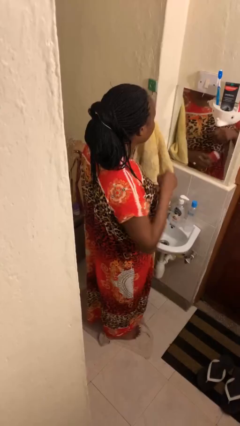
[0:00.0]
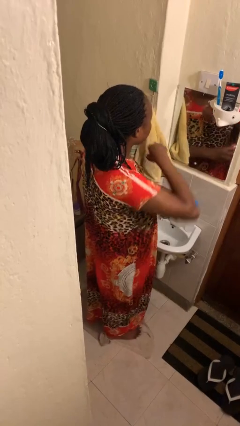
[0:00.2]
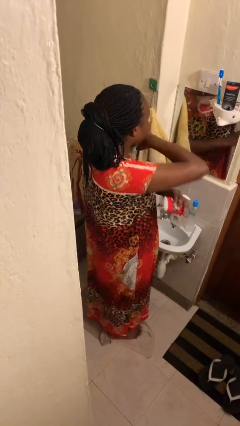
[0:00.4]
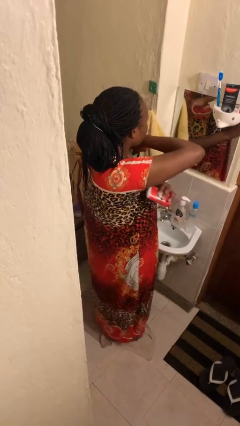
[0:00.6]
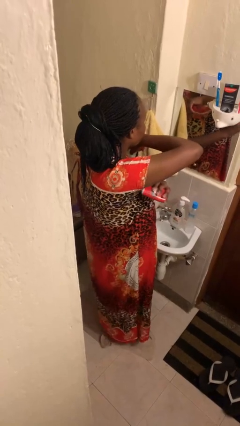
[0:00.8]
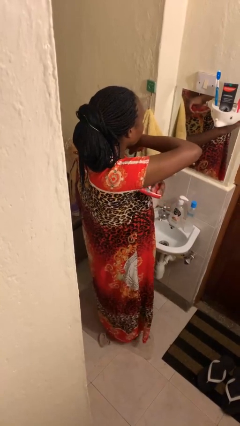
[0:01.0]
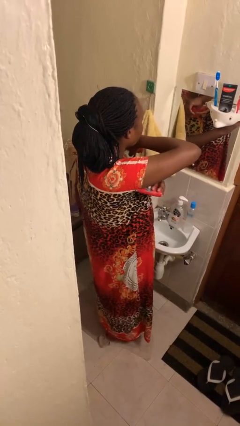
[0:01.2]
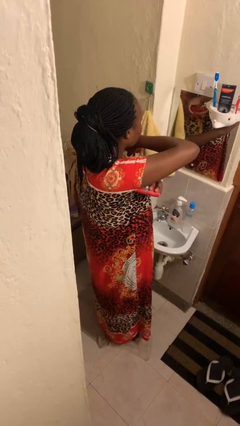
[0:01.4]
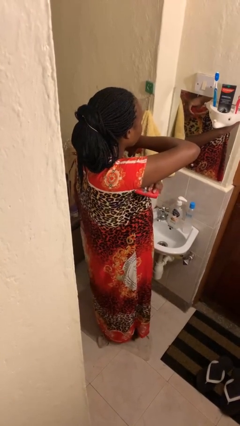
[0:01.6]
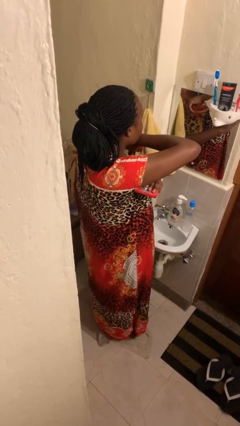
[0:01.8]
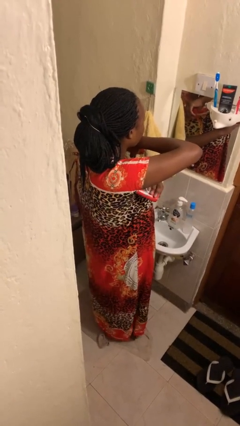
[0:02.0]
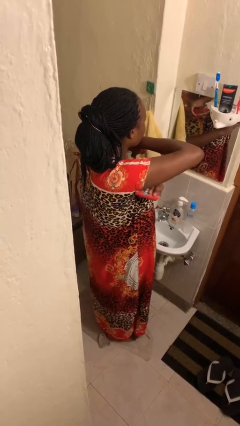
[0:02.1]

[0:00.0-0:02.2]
person applies deodorant

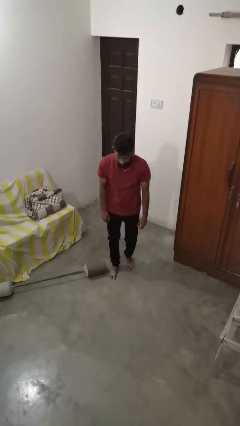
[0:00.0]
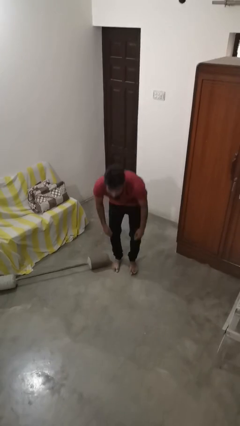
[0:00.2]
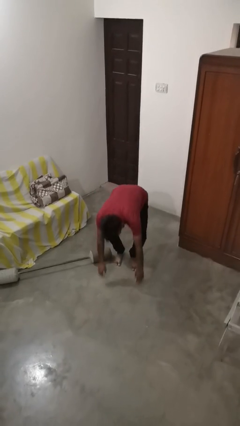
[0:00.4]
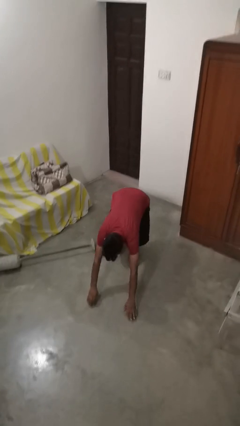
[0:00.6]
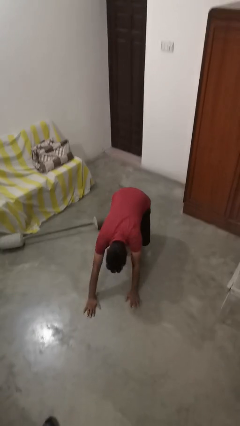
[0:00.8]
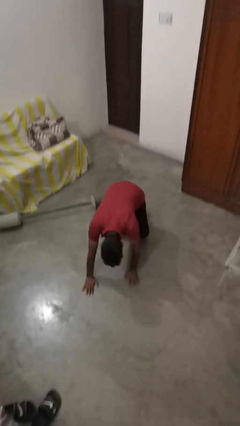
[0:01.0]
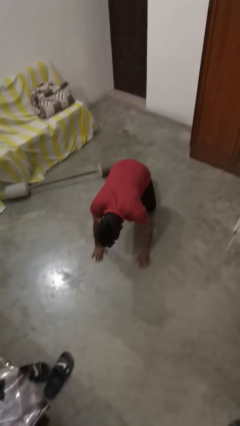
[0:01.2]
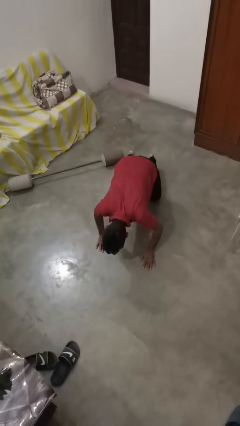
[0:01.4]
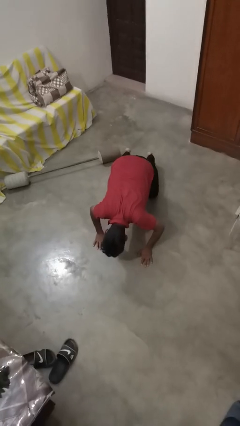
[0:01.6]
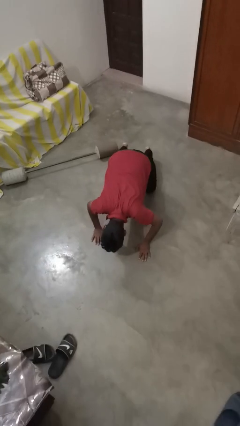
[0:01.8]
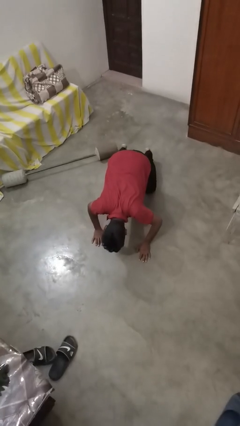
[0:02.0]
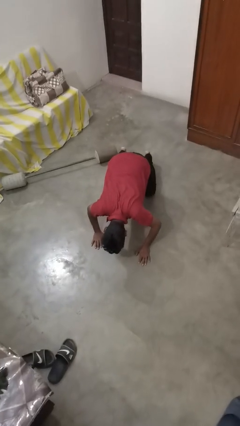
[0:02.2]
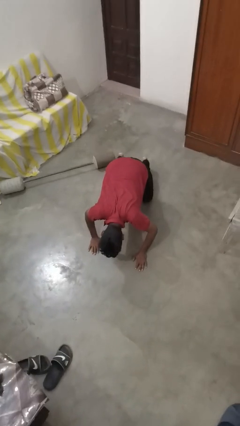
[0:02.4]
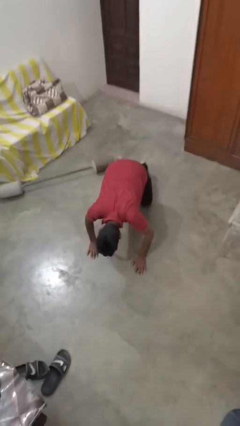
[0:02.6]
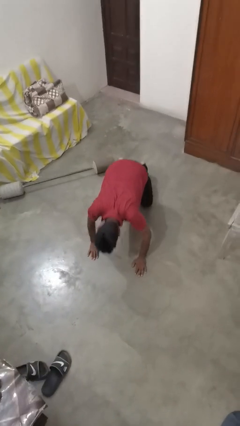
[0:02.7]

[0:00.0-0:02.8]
person lies down on floor

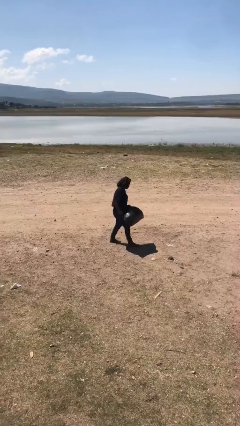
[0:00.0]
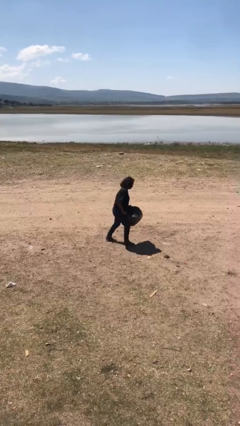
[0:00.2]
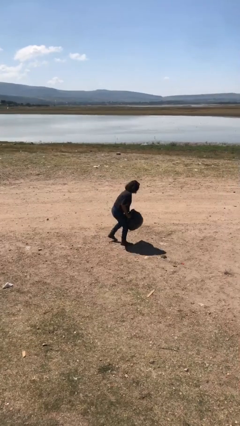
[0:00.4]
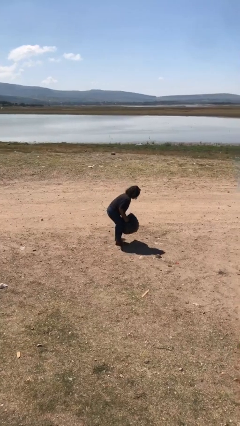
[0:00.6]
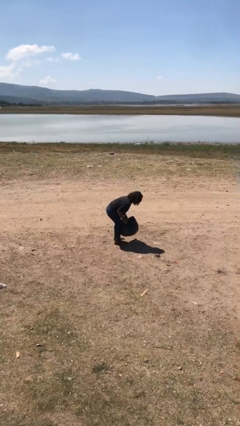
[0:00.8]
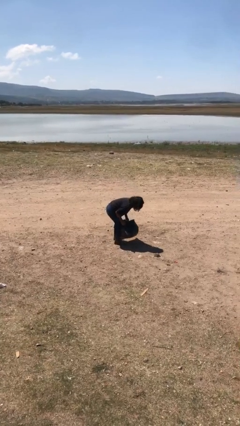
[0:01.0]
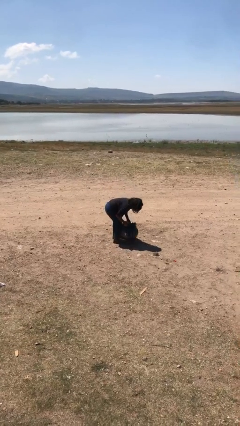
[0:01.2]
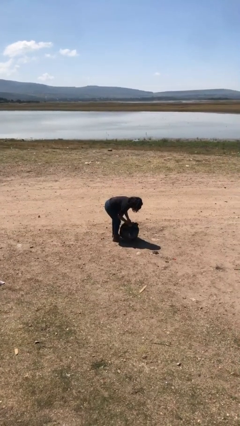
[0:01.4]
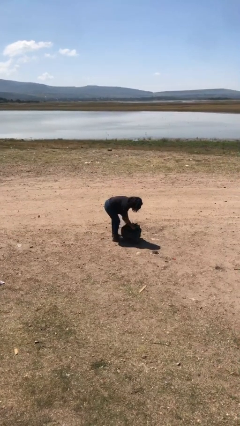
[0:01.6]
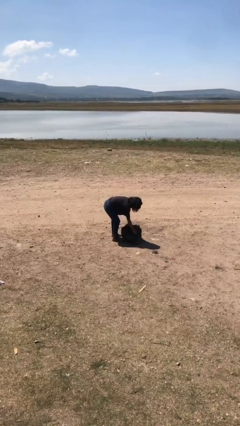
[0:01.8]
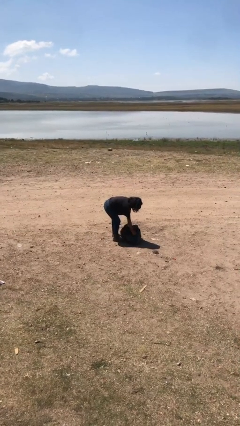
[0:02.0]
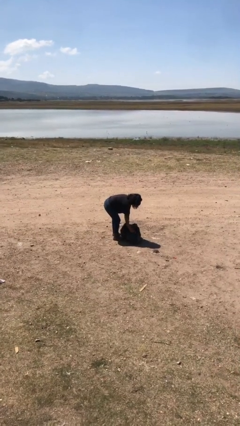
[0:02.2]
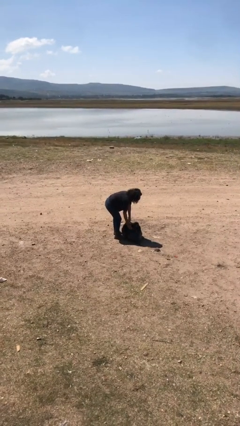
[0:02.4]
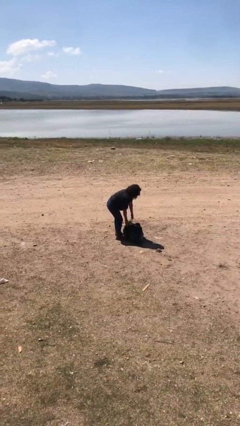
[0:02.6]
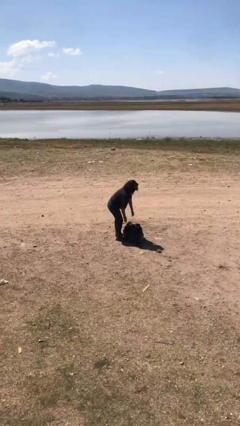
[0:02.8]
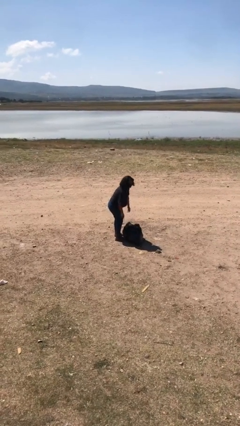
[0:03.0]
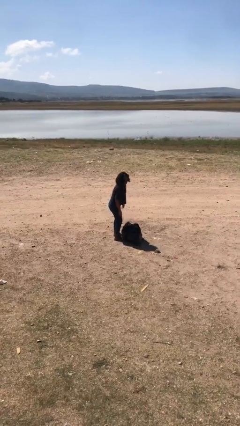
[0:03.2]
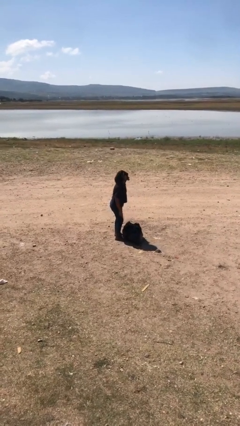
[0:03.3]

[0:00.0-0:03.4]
person puts down object on floor

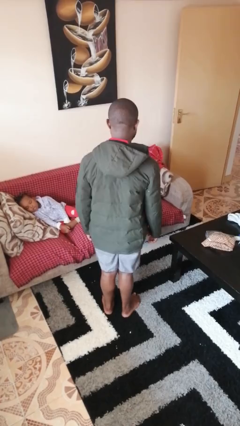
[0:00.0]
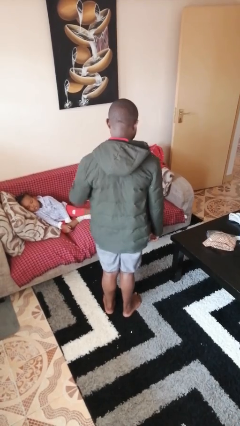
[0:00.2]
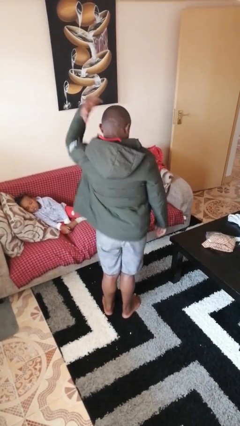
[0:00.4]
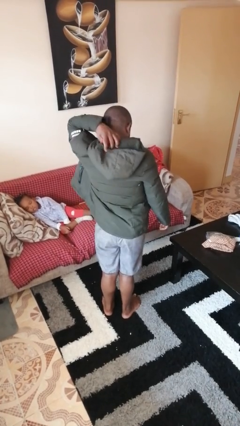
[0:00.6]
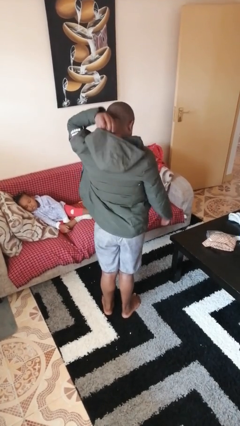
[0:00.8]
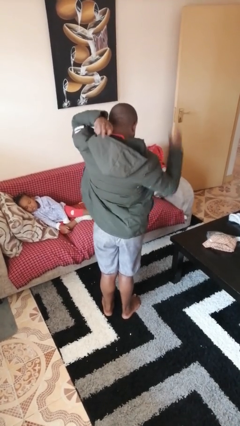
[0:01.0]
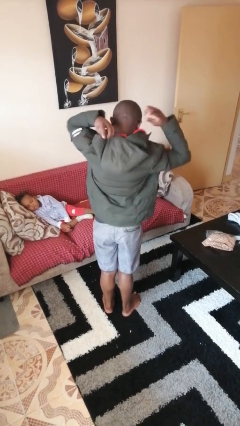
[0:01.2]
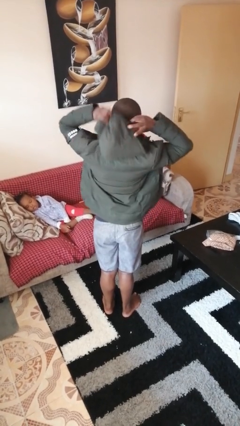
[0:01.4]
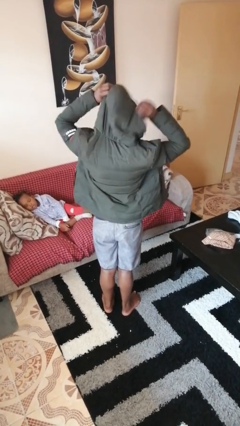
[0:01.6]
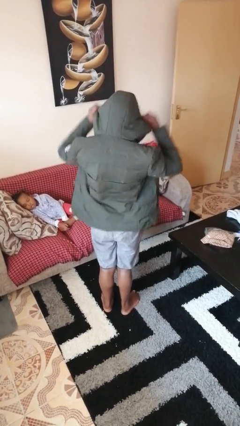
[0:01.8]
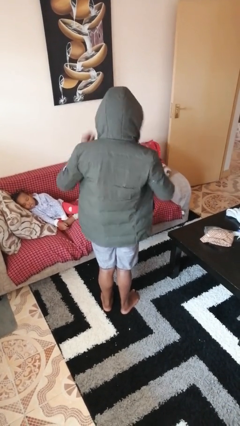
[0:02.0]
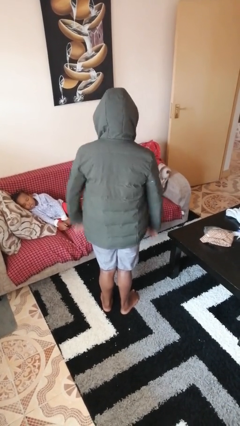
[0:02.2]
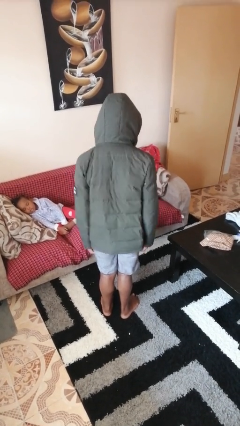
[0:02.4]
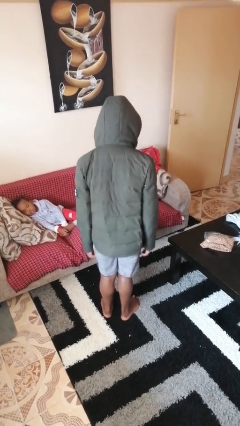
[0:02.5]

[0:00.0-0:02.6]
person puts on hoodie

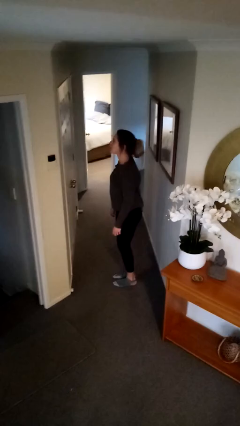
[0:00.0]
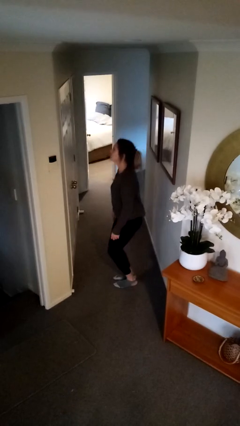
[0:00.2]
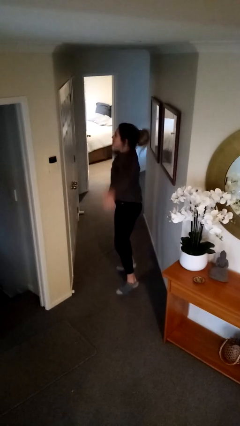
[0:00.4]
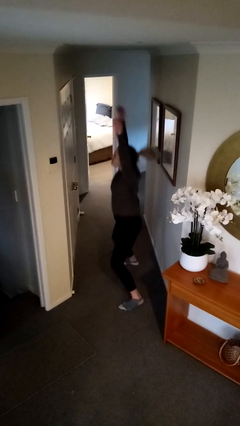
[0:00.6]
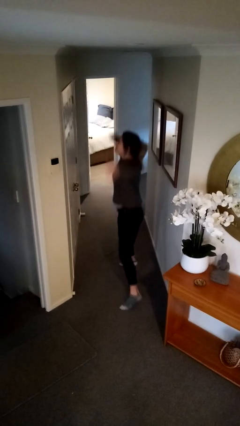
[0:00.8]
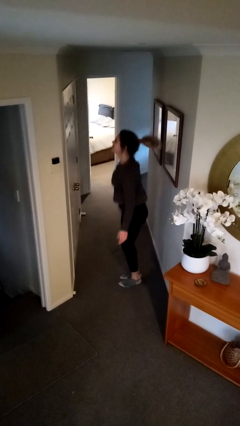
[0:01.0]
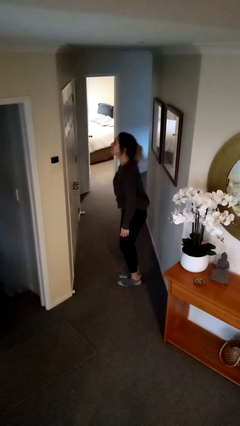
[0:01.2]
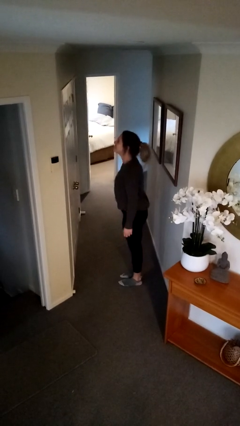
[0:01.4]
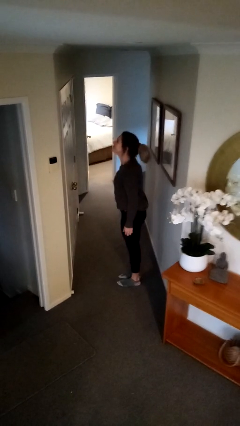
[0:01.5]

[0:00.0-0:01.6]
person exercises with jumping jacks

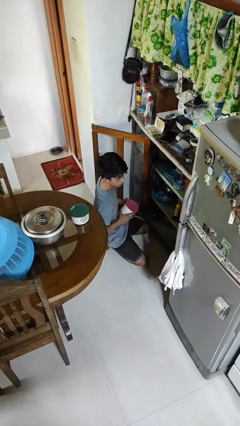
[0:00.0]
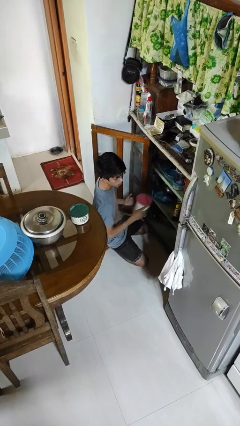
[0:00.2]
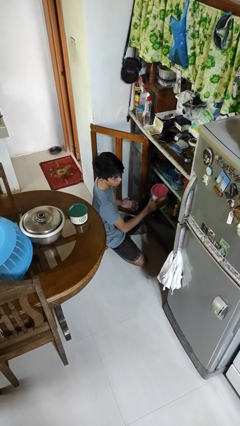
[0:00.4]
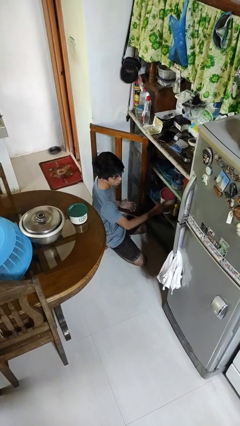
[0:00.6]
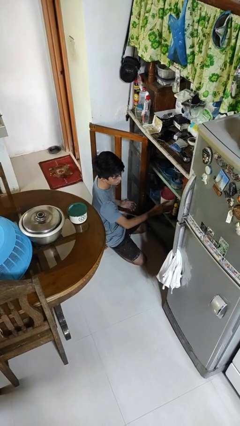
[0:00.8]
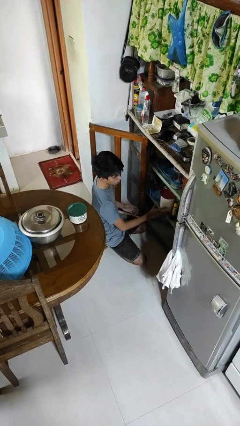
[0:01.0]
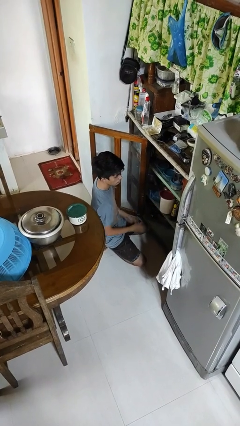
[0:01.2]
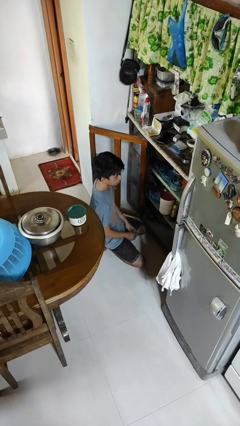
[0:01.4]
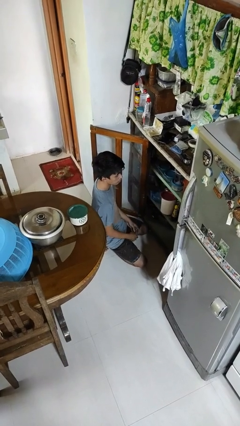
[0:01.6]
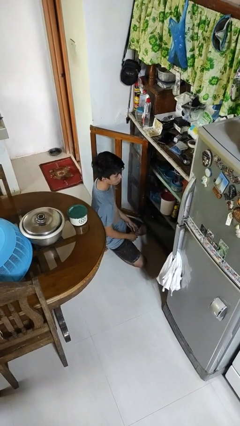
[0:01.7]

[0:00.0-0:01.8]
person puts down object into cabinet

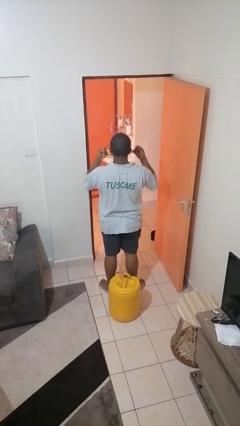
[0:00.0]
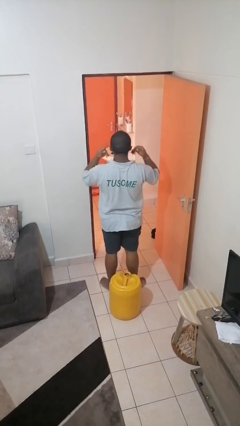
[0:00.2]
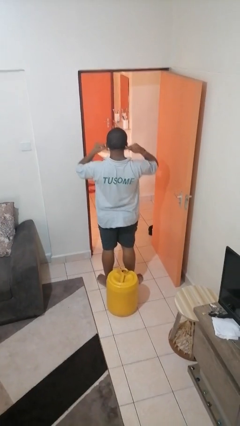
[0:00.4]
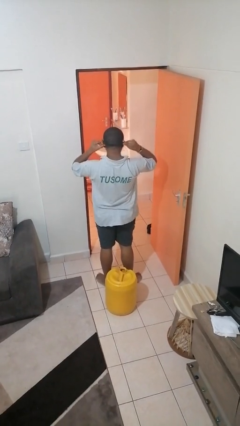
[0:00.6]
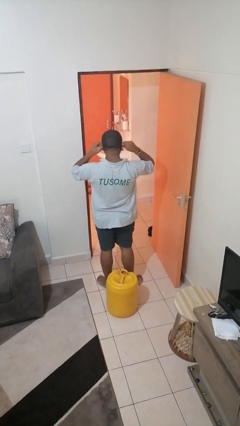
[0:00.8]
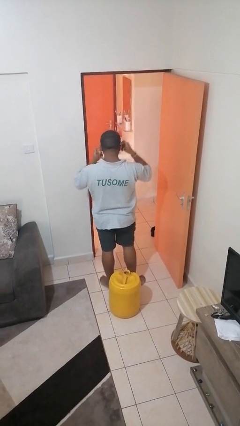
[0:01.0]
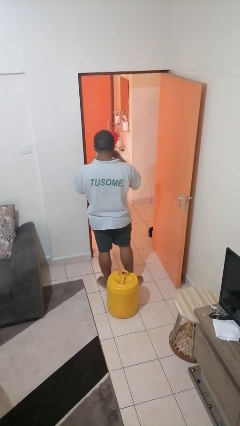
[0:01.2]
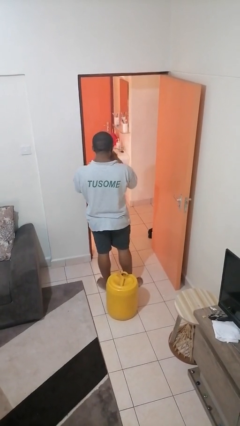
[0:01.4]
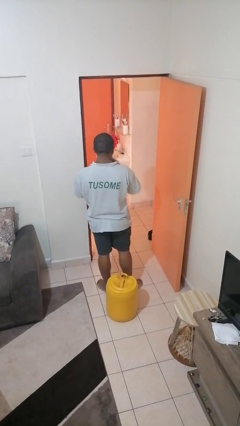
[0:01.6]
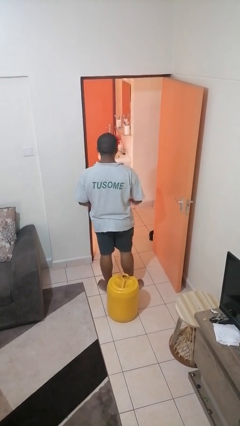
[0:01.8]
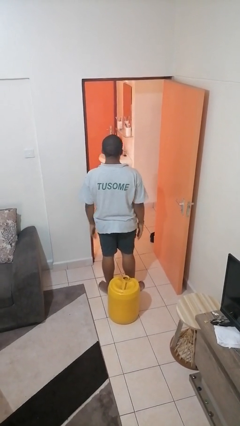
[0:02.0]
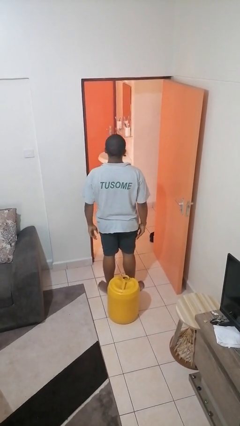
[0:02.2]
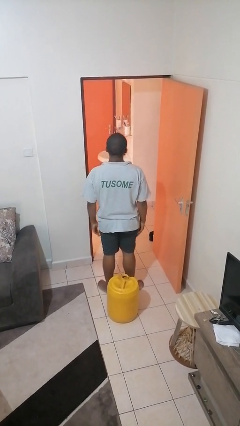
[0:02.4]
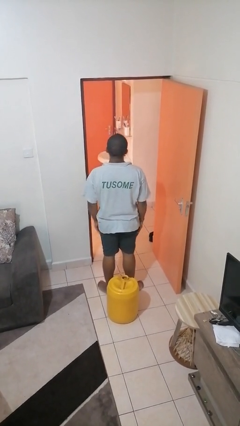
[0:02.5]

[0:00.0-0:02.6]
person puts on facemask
